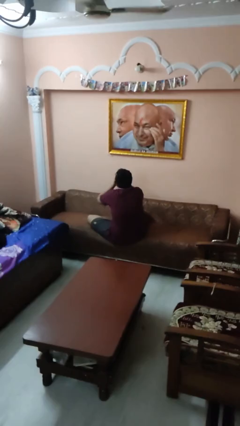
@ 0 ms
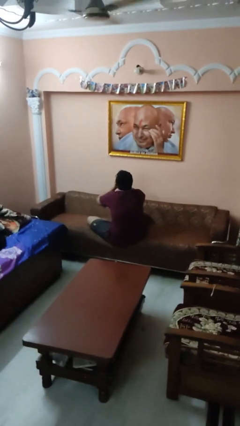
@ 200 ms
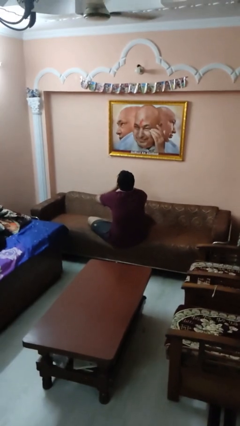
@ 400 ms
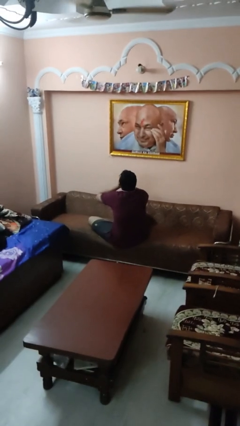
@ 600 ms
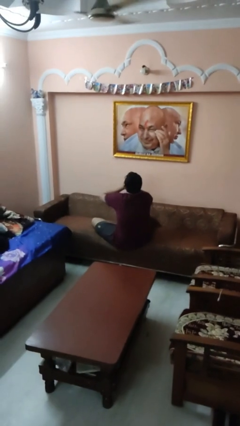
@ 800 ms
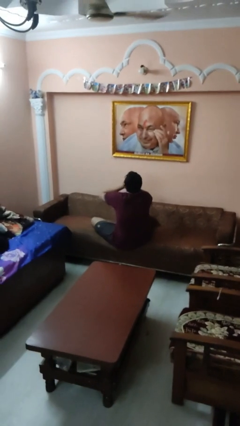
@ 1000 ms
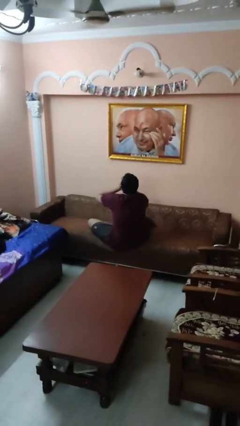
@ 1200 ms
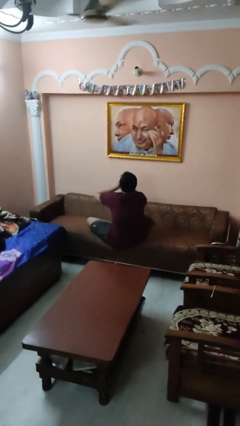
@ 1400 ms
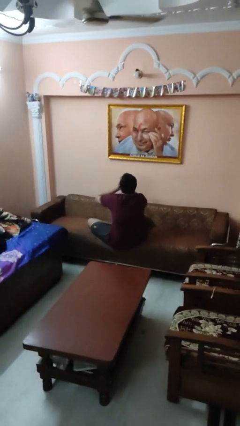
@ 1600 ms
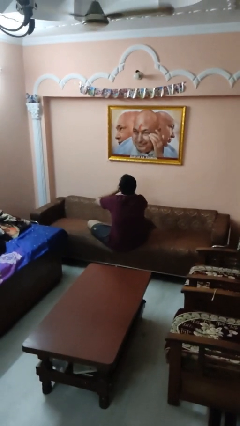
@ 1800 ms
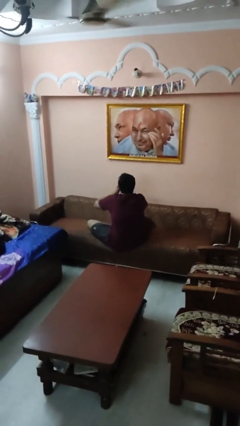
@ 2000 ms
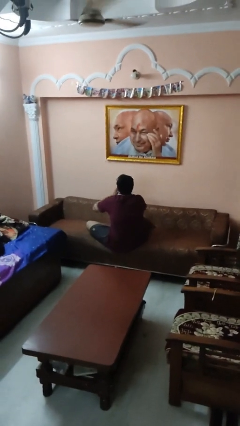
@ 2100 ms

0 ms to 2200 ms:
person covers face with hands

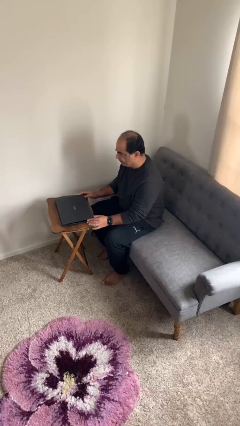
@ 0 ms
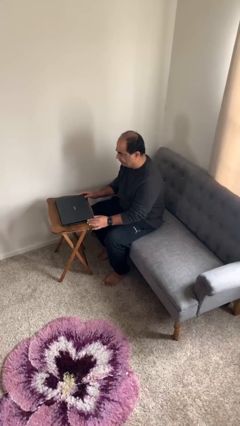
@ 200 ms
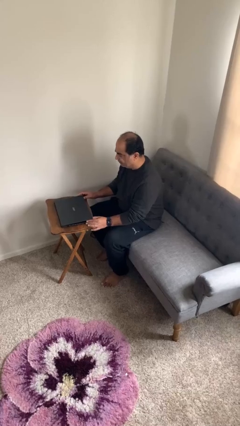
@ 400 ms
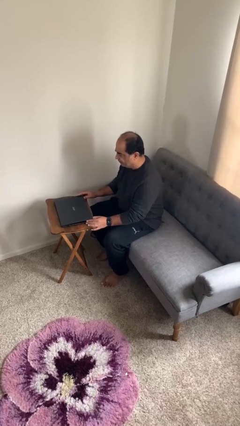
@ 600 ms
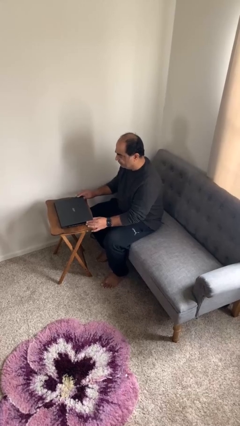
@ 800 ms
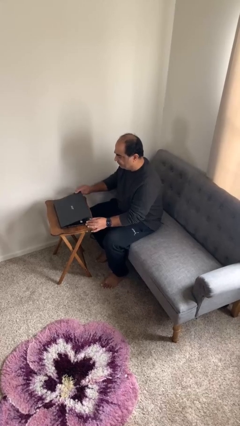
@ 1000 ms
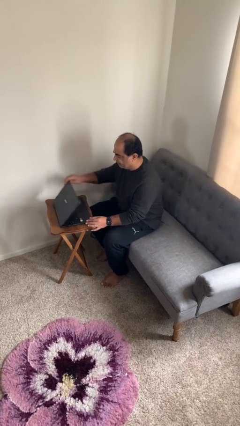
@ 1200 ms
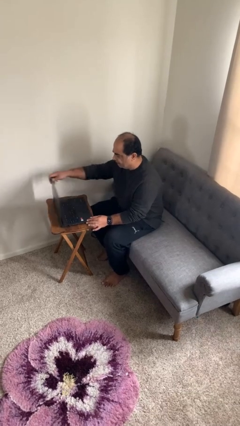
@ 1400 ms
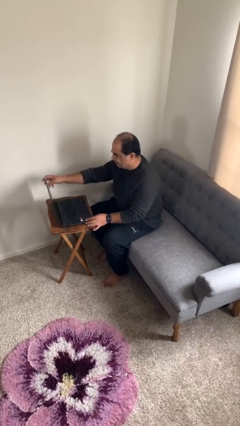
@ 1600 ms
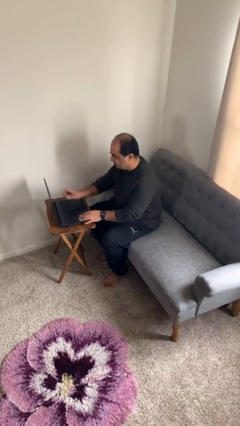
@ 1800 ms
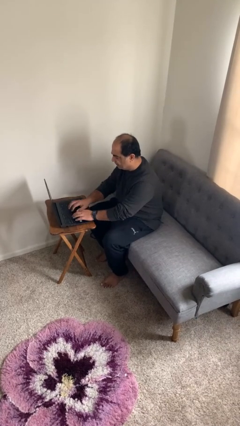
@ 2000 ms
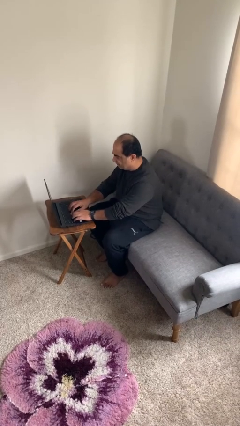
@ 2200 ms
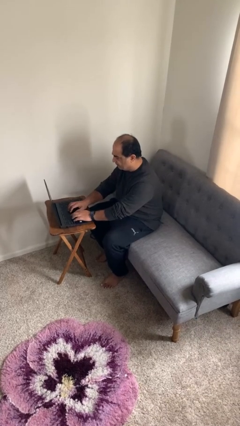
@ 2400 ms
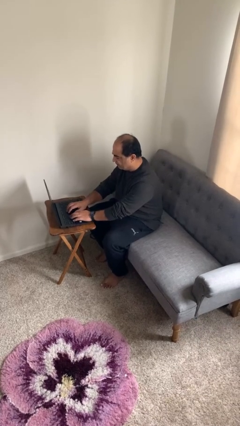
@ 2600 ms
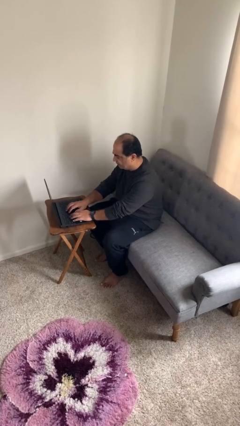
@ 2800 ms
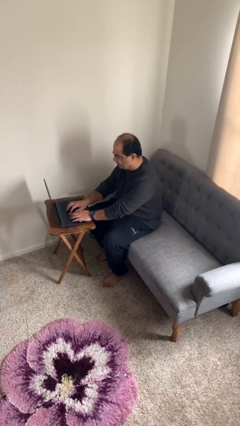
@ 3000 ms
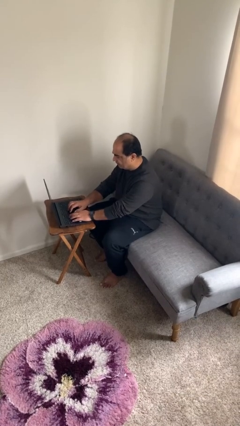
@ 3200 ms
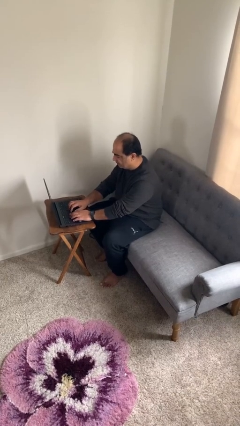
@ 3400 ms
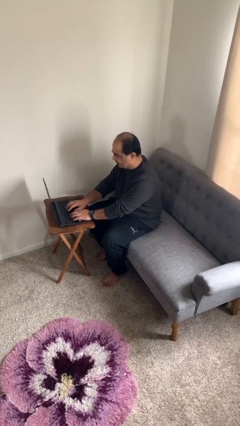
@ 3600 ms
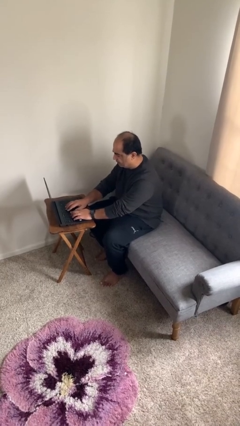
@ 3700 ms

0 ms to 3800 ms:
person interacts with laptop

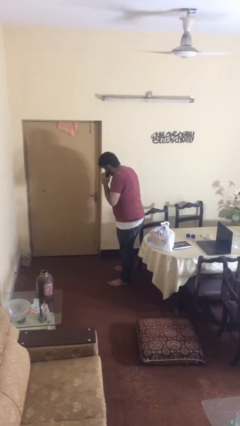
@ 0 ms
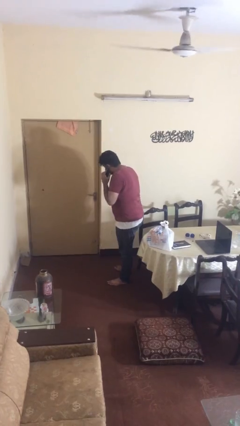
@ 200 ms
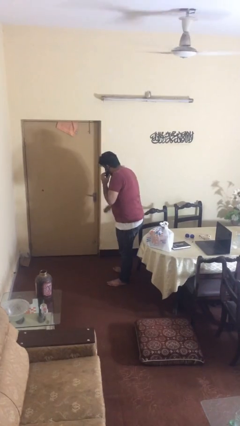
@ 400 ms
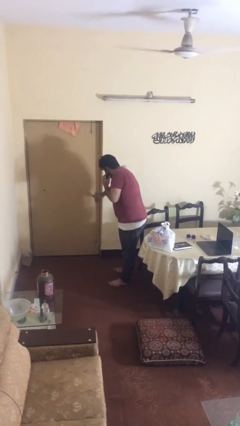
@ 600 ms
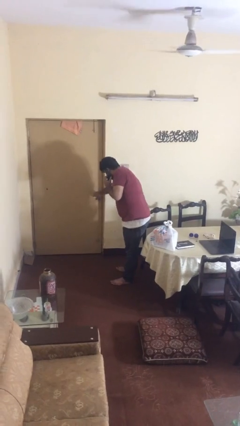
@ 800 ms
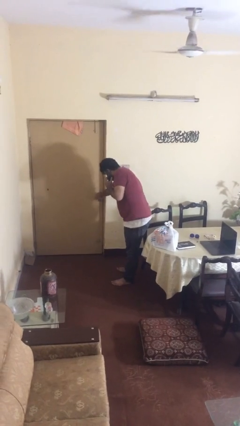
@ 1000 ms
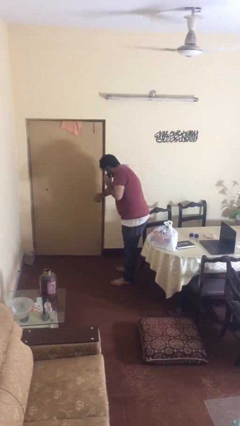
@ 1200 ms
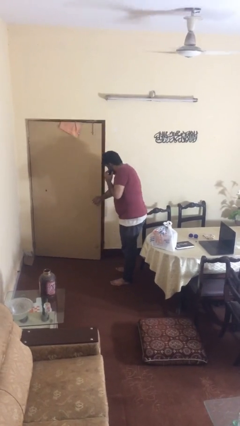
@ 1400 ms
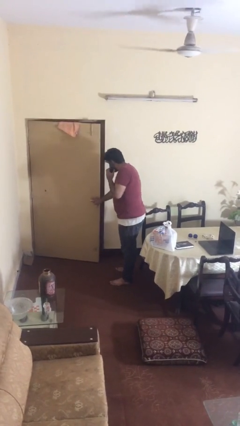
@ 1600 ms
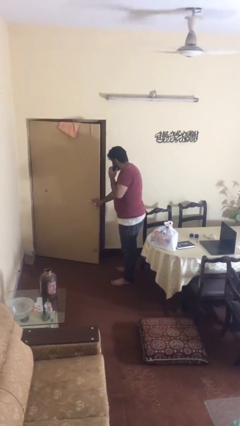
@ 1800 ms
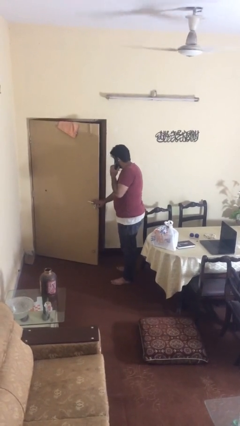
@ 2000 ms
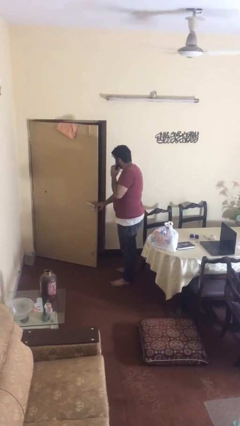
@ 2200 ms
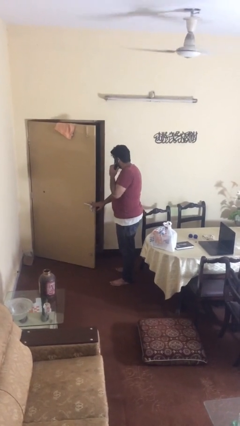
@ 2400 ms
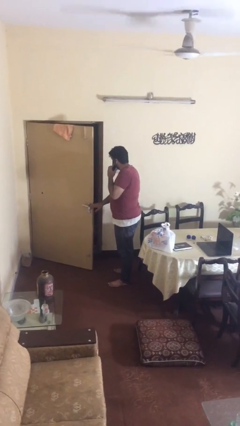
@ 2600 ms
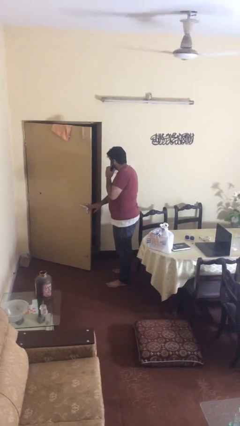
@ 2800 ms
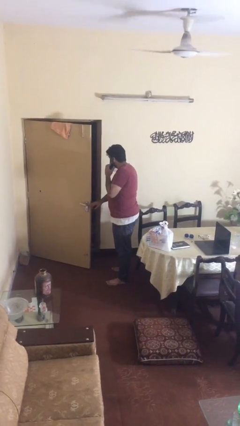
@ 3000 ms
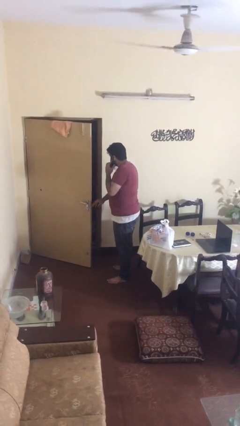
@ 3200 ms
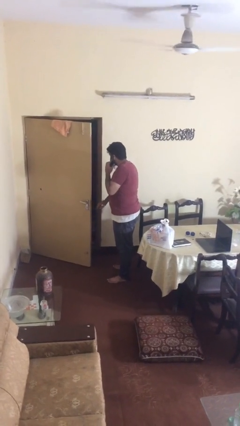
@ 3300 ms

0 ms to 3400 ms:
person opens facility door

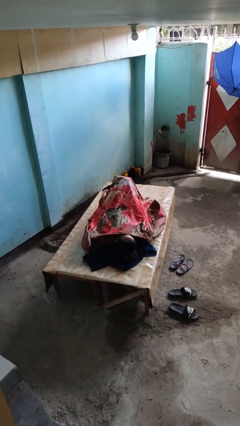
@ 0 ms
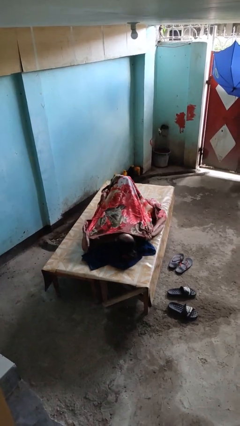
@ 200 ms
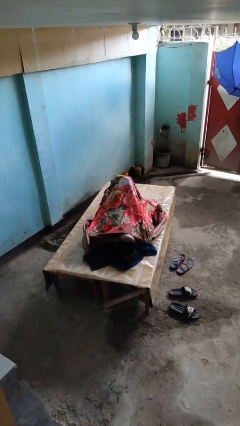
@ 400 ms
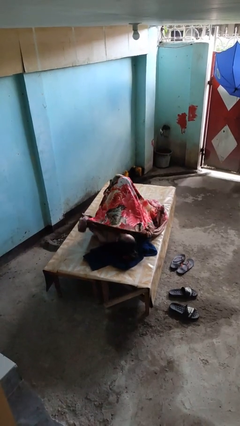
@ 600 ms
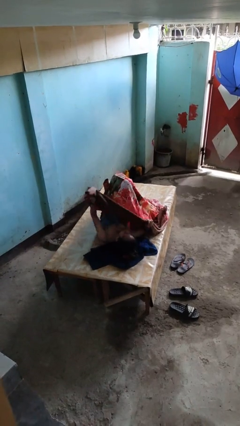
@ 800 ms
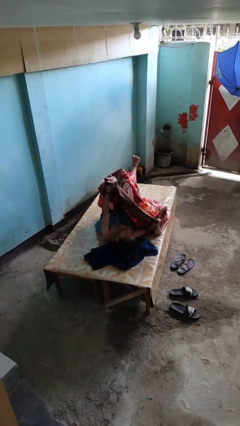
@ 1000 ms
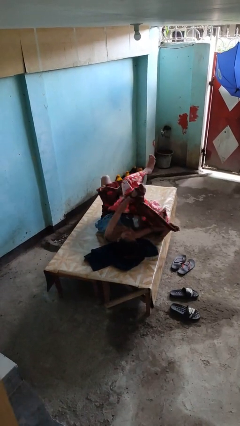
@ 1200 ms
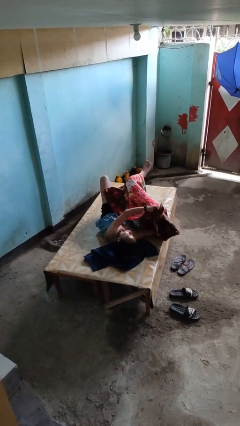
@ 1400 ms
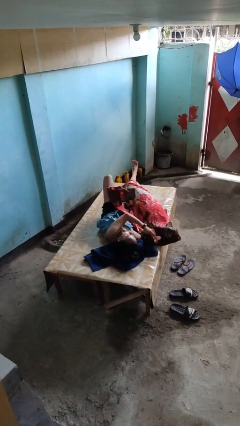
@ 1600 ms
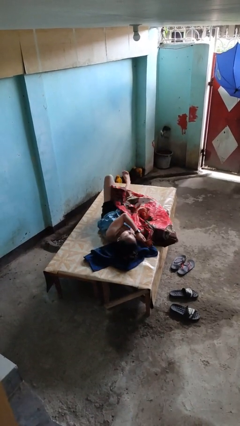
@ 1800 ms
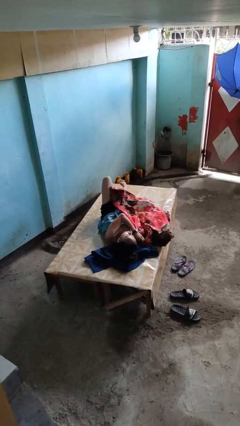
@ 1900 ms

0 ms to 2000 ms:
person uncovers with blanket

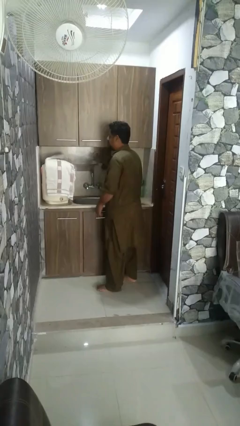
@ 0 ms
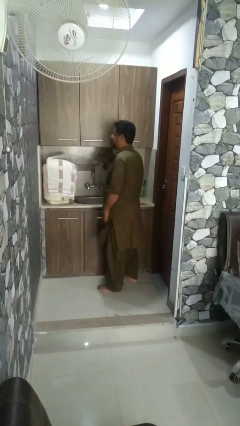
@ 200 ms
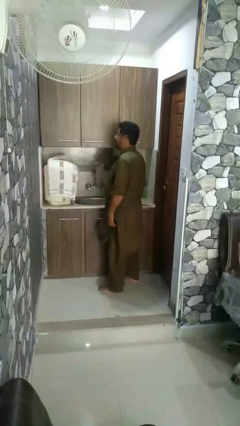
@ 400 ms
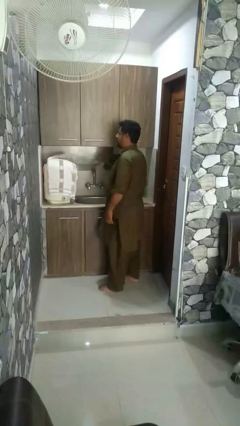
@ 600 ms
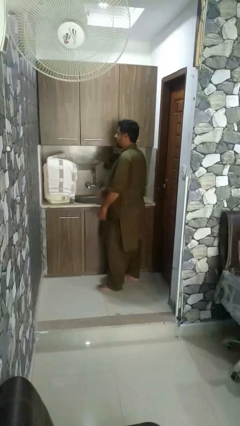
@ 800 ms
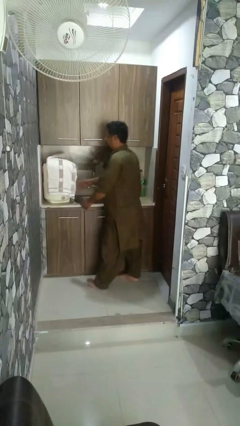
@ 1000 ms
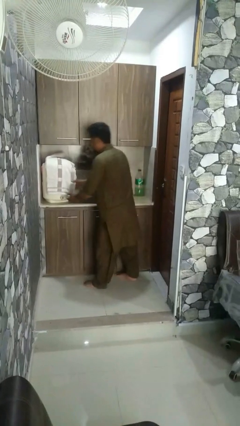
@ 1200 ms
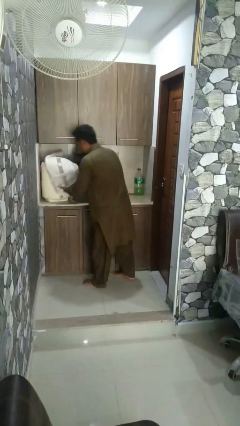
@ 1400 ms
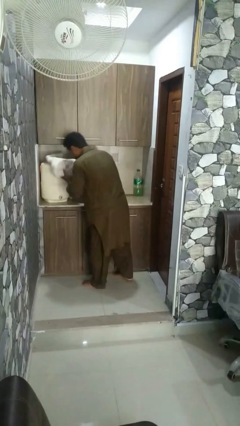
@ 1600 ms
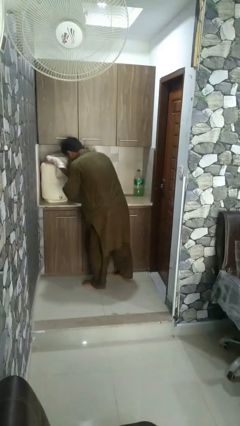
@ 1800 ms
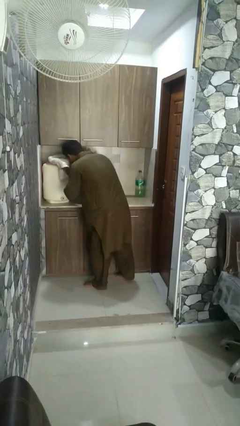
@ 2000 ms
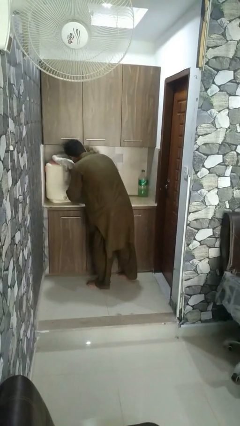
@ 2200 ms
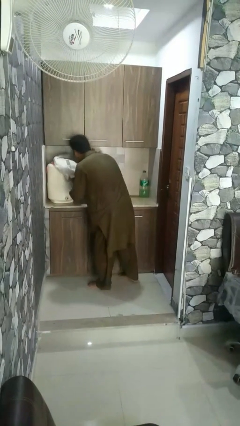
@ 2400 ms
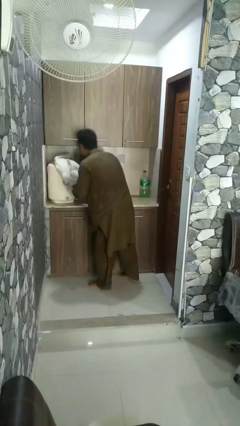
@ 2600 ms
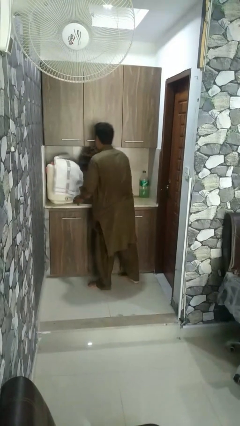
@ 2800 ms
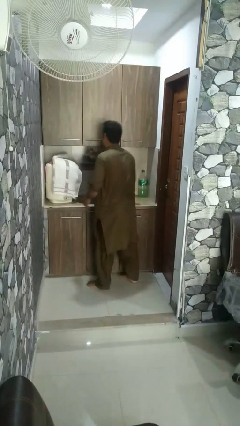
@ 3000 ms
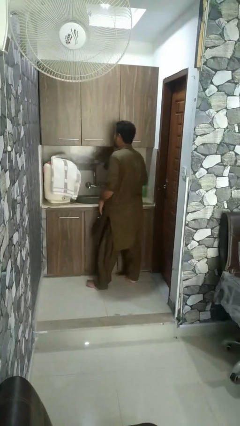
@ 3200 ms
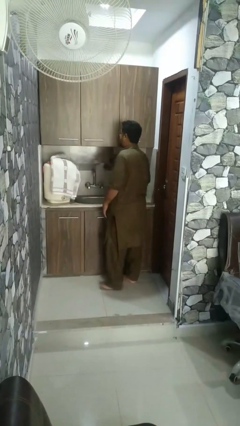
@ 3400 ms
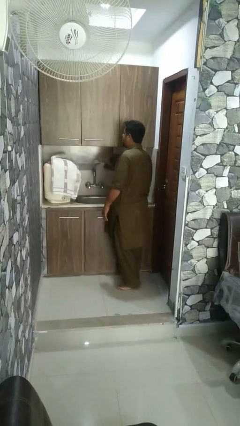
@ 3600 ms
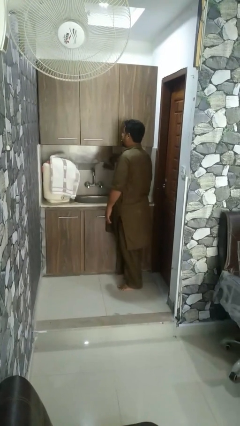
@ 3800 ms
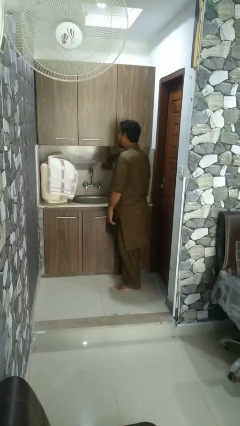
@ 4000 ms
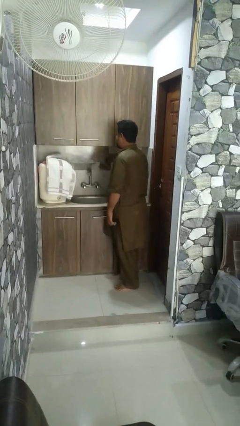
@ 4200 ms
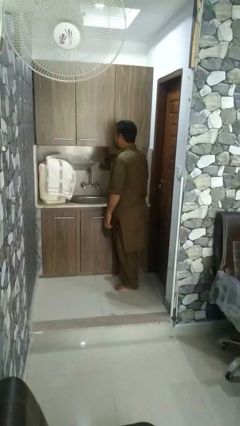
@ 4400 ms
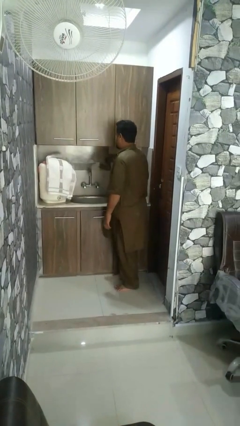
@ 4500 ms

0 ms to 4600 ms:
person dries face with towel

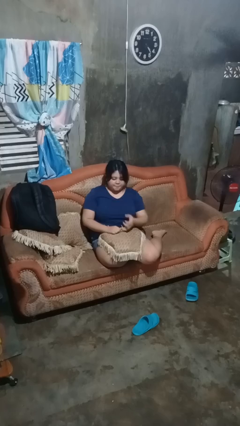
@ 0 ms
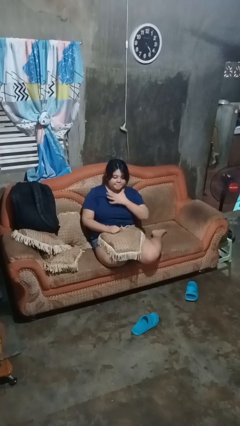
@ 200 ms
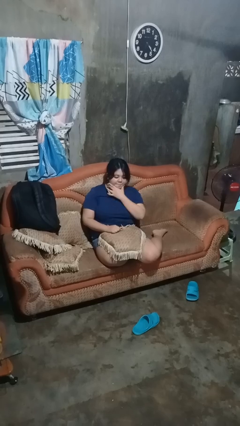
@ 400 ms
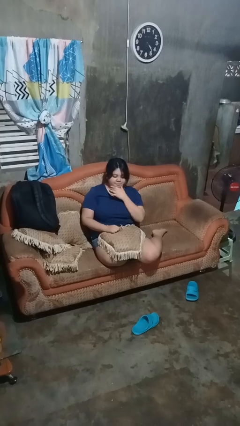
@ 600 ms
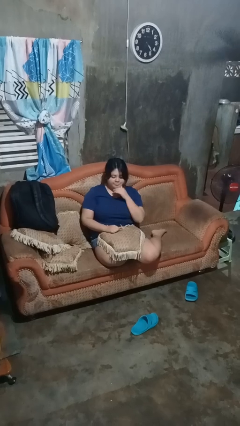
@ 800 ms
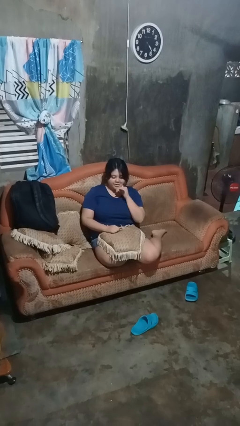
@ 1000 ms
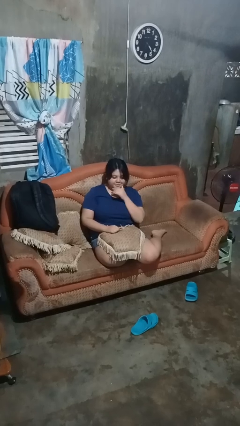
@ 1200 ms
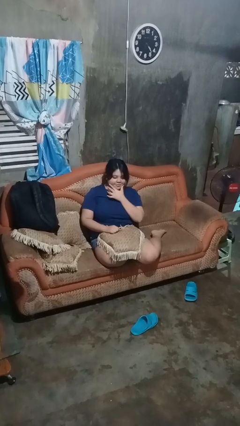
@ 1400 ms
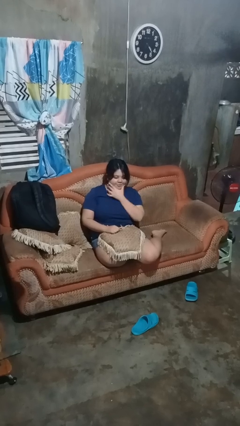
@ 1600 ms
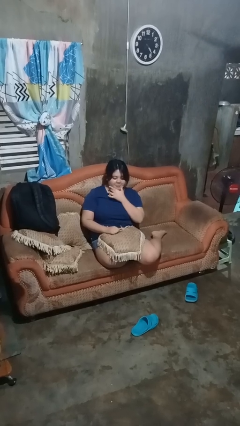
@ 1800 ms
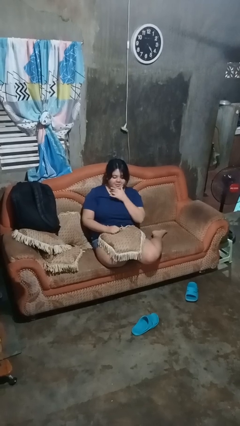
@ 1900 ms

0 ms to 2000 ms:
person strokes chin
